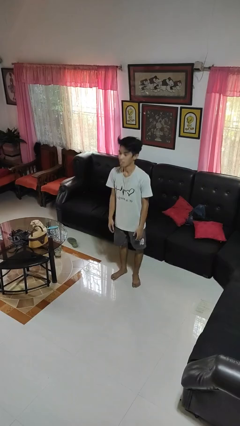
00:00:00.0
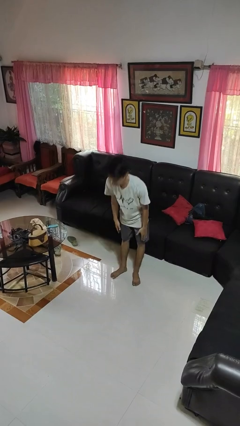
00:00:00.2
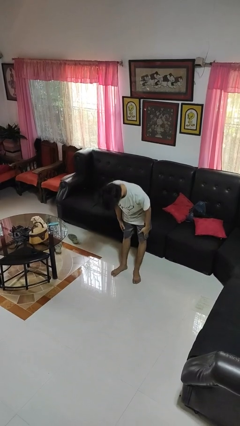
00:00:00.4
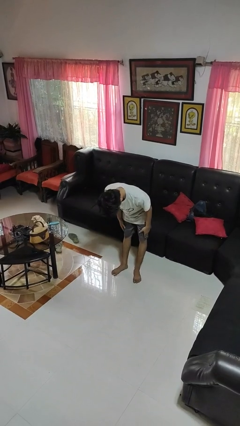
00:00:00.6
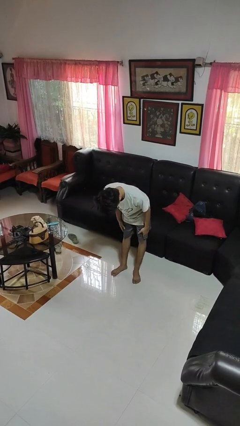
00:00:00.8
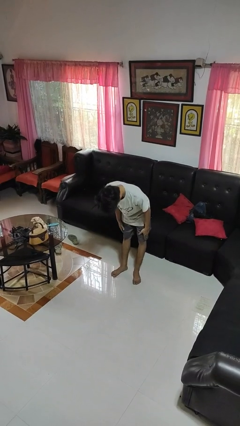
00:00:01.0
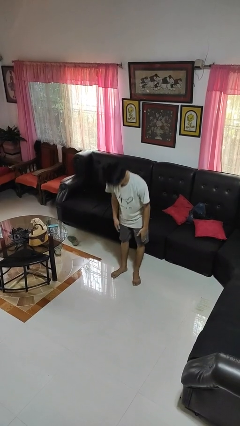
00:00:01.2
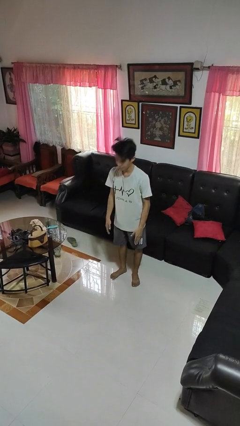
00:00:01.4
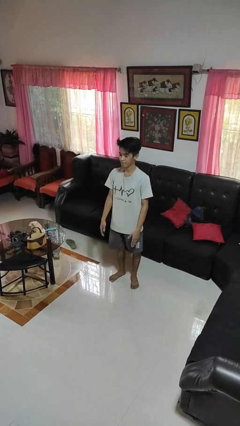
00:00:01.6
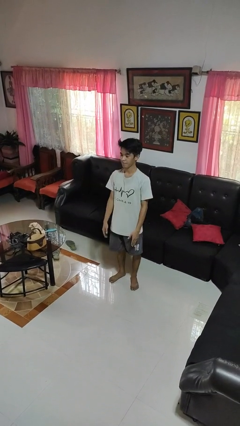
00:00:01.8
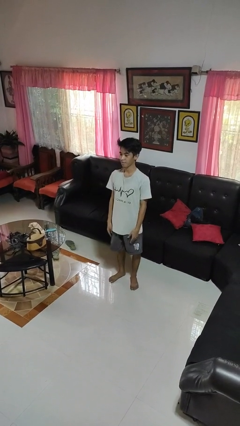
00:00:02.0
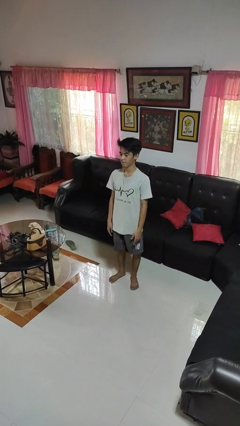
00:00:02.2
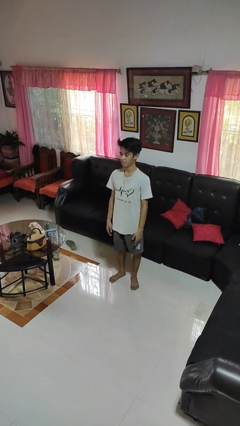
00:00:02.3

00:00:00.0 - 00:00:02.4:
person bows

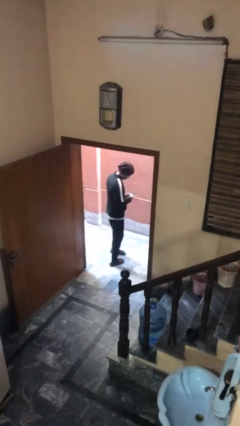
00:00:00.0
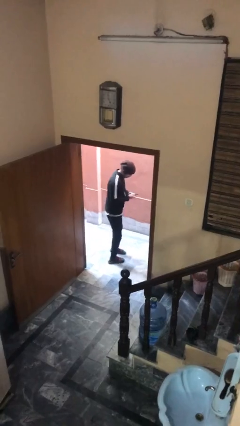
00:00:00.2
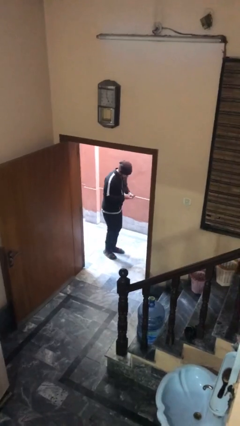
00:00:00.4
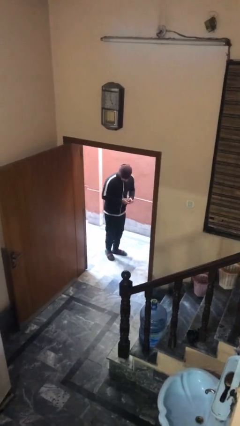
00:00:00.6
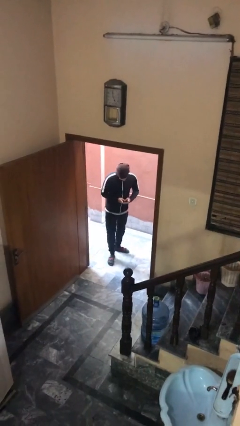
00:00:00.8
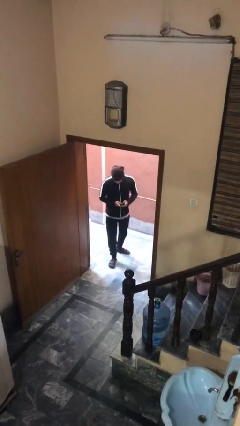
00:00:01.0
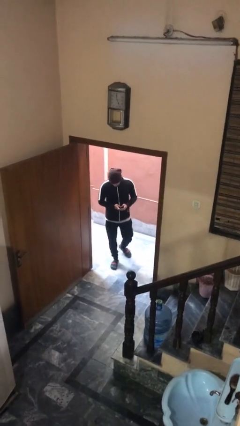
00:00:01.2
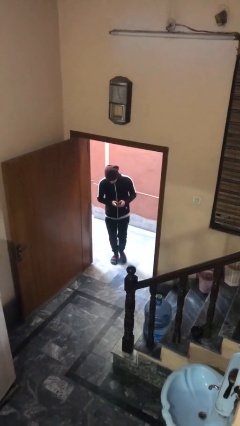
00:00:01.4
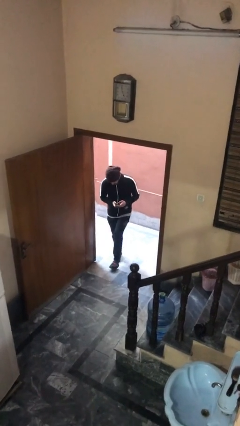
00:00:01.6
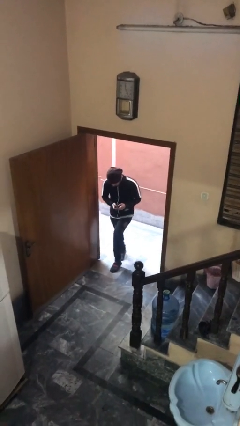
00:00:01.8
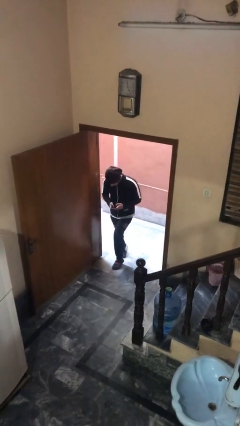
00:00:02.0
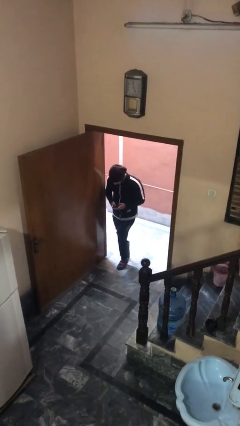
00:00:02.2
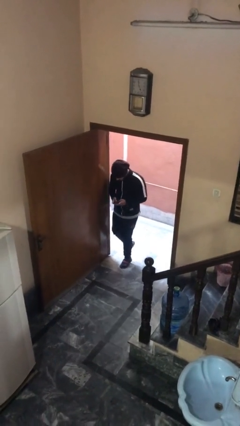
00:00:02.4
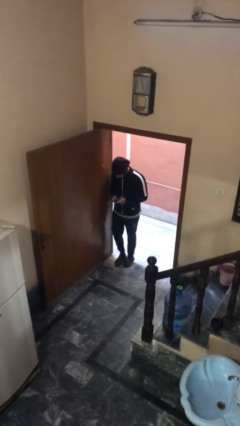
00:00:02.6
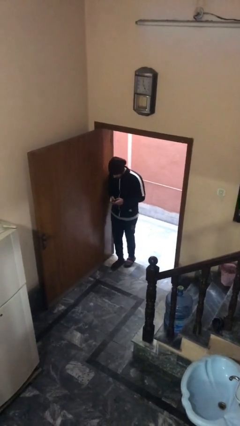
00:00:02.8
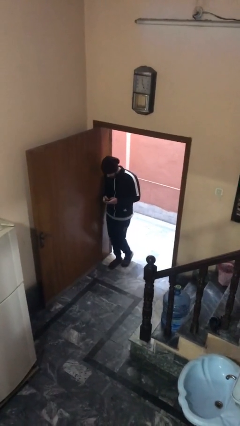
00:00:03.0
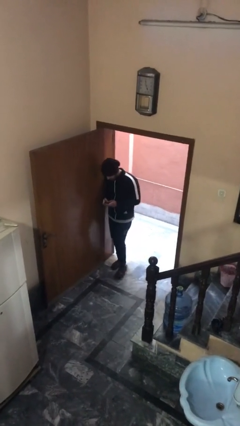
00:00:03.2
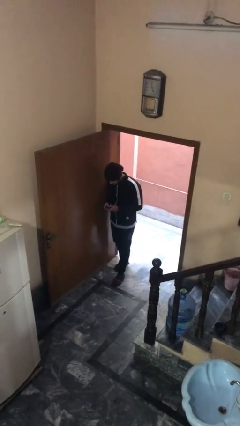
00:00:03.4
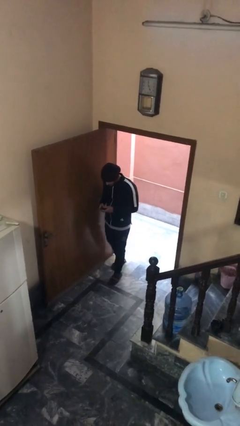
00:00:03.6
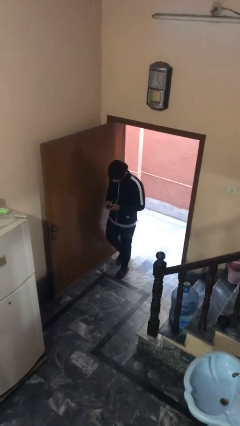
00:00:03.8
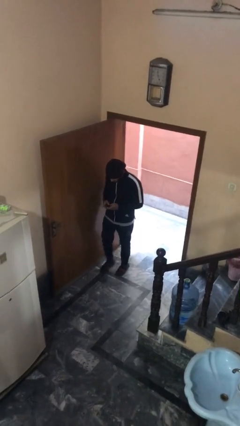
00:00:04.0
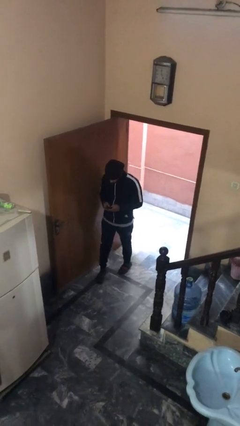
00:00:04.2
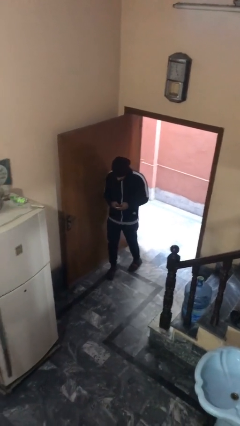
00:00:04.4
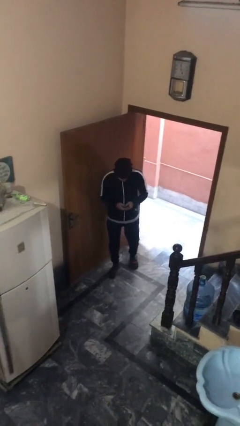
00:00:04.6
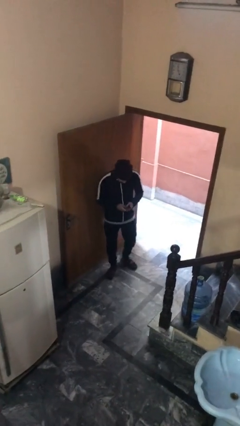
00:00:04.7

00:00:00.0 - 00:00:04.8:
person enters scene through structure

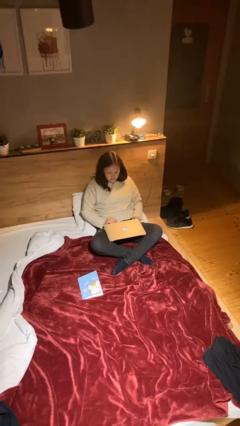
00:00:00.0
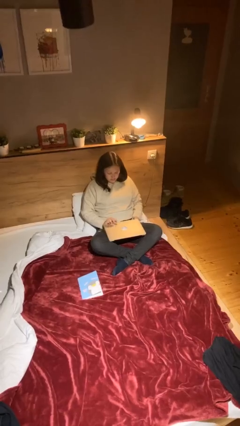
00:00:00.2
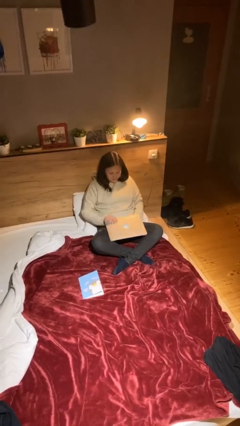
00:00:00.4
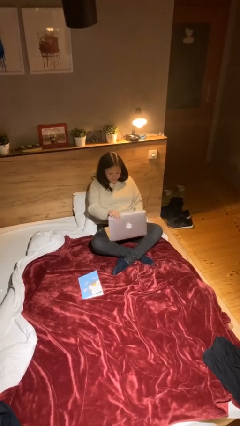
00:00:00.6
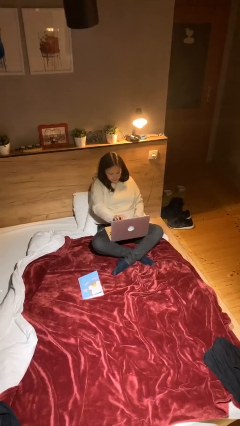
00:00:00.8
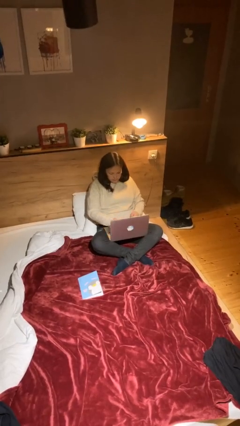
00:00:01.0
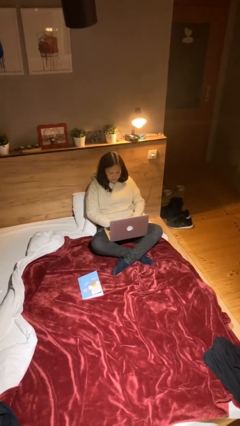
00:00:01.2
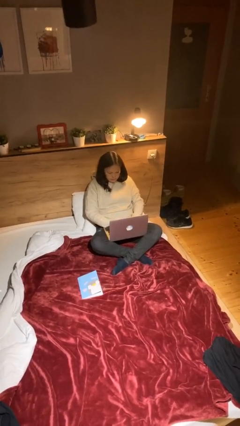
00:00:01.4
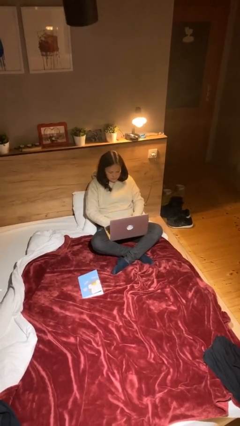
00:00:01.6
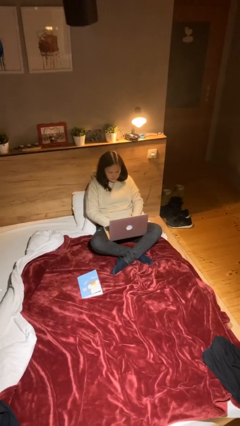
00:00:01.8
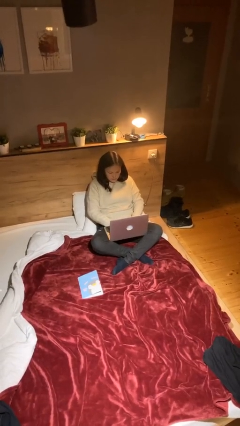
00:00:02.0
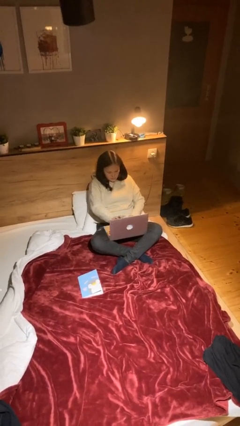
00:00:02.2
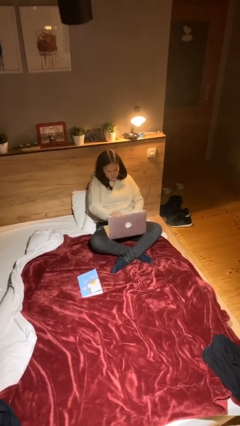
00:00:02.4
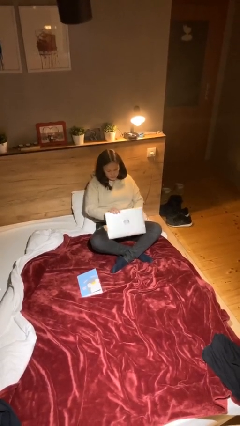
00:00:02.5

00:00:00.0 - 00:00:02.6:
person interacts with laptop

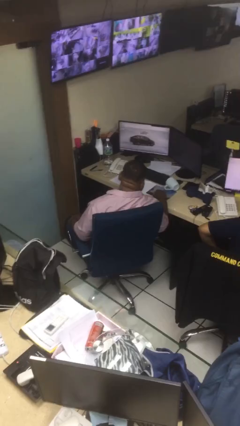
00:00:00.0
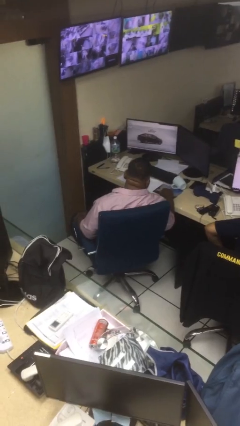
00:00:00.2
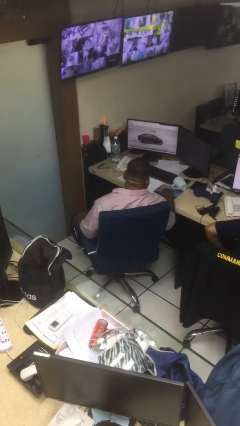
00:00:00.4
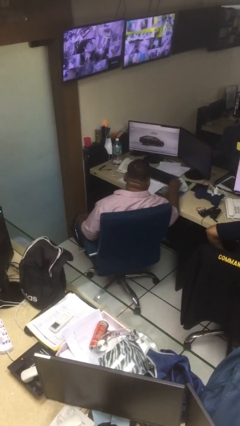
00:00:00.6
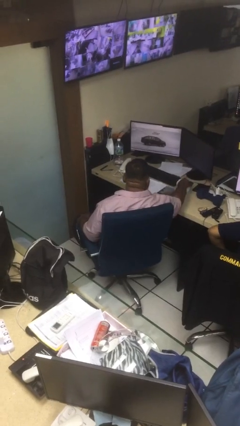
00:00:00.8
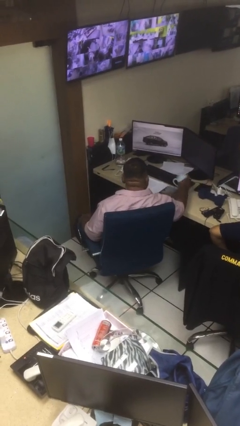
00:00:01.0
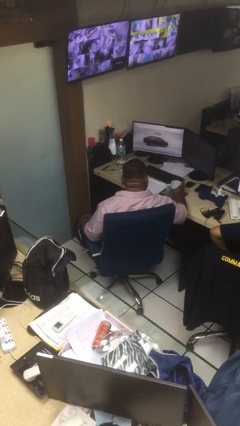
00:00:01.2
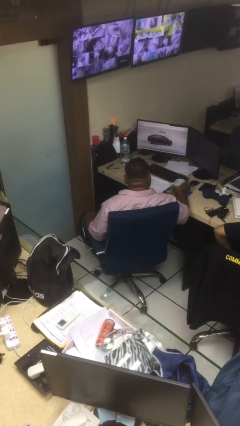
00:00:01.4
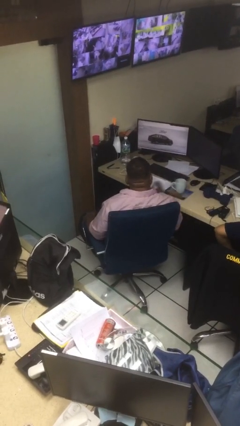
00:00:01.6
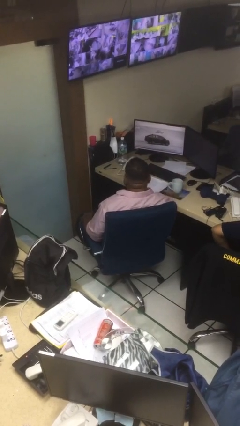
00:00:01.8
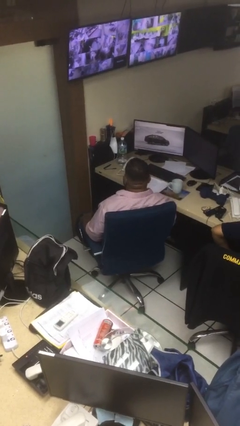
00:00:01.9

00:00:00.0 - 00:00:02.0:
person sets upright glass

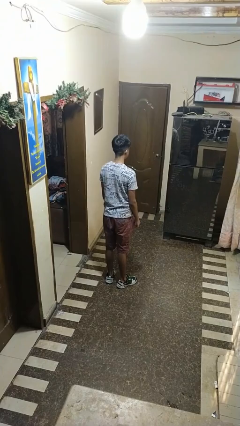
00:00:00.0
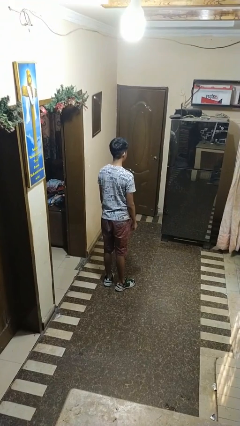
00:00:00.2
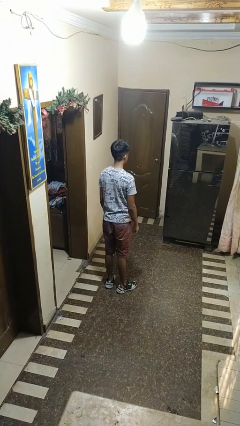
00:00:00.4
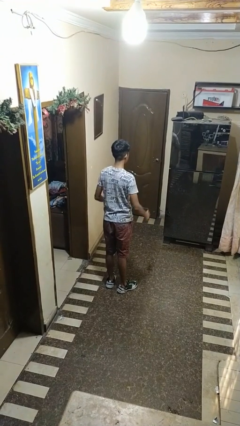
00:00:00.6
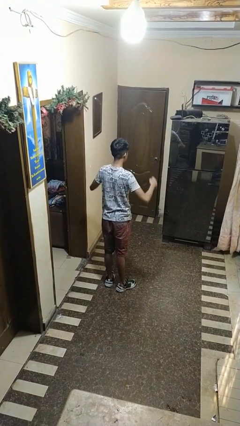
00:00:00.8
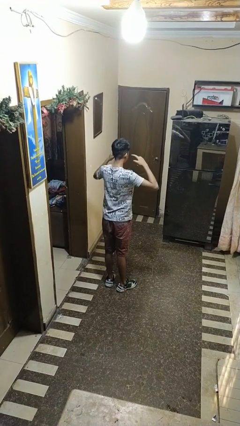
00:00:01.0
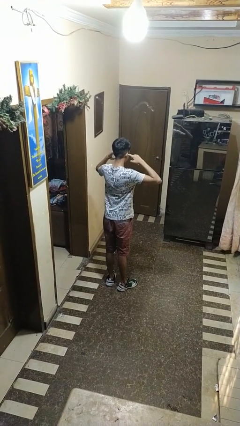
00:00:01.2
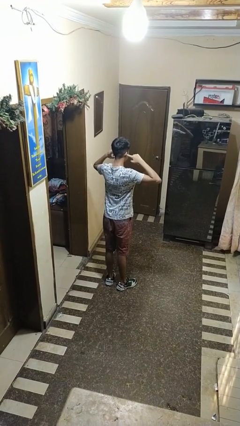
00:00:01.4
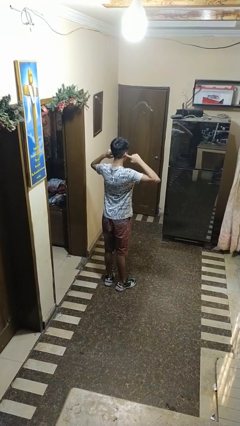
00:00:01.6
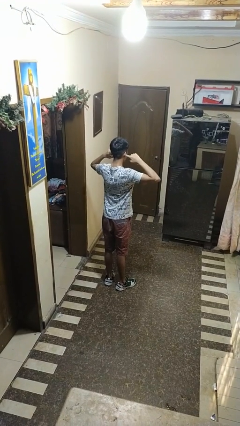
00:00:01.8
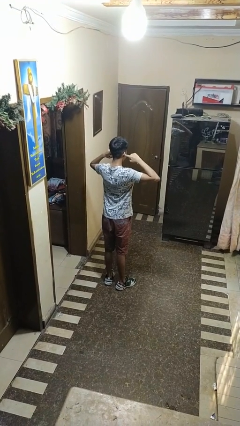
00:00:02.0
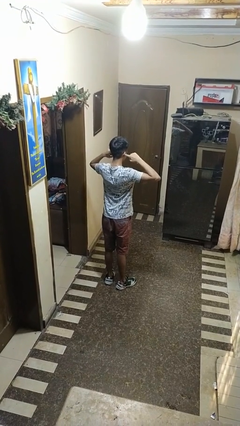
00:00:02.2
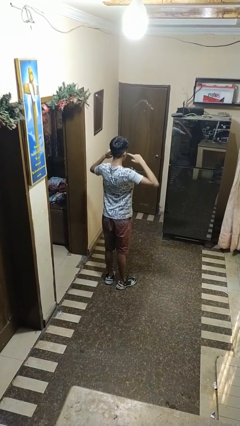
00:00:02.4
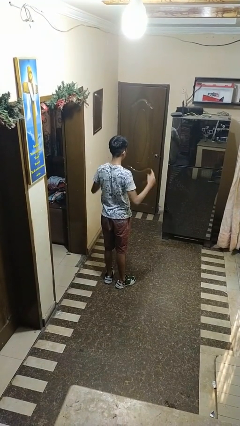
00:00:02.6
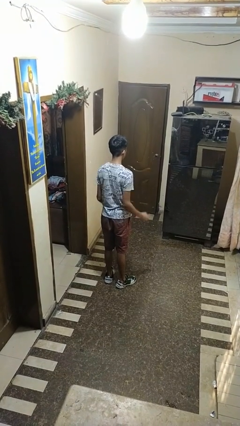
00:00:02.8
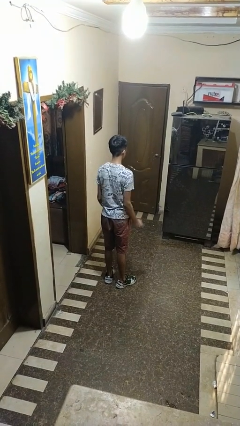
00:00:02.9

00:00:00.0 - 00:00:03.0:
person puts fingers in ear

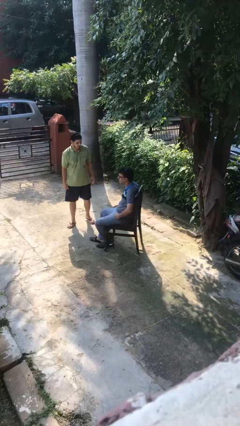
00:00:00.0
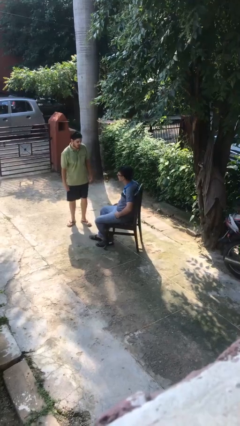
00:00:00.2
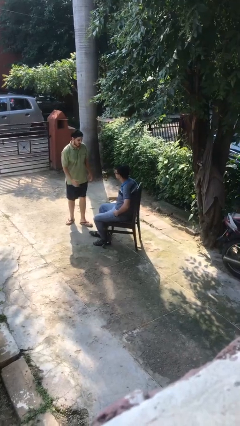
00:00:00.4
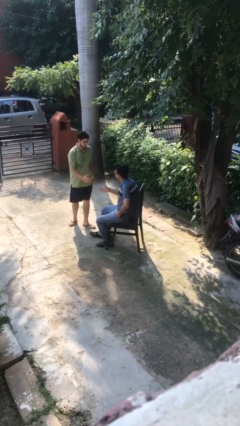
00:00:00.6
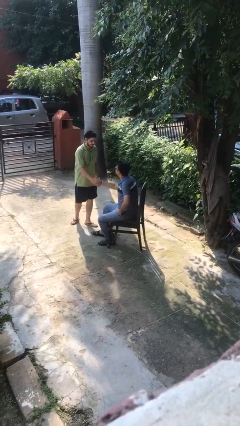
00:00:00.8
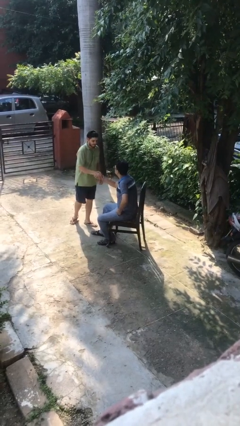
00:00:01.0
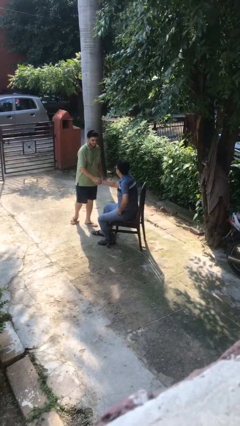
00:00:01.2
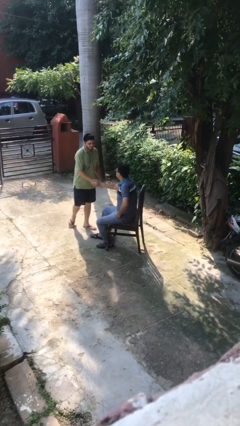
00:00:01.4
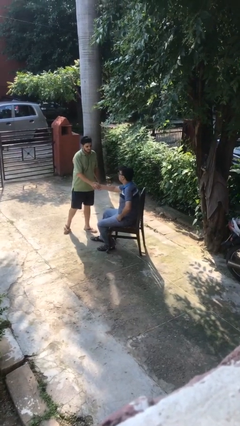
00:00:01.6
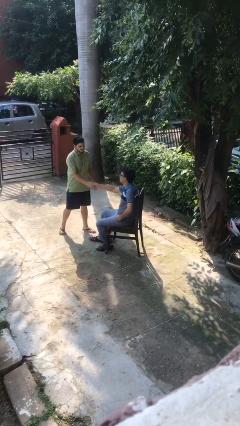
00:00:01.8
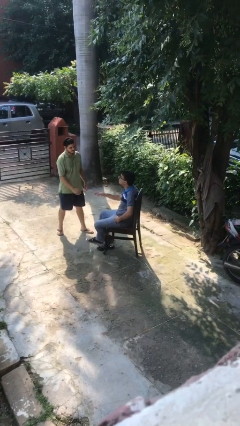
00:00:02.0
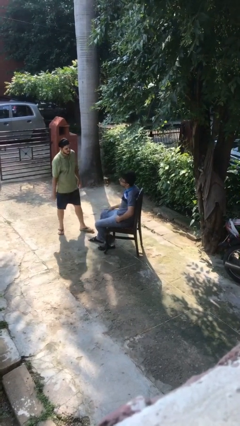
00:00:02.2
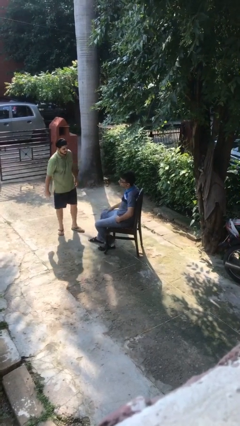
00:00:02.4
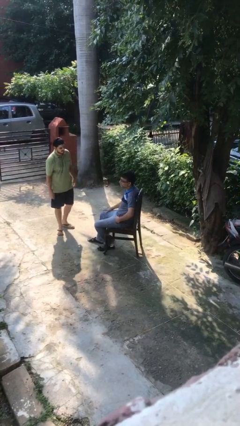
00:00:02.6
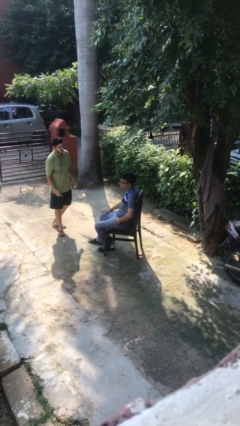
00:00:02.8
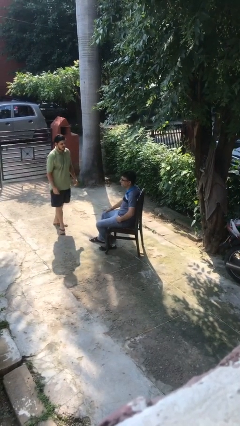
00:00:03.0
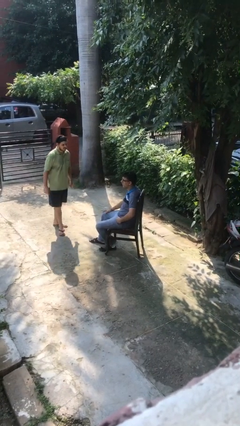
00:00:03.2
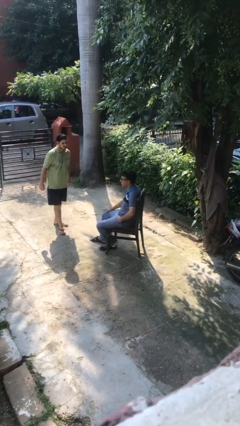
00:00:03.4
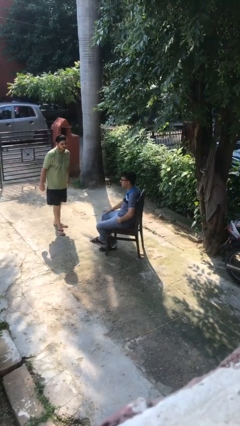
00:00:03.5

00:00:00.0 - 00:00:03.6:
person shakes hand
